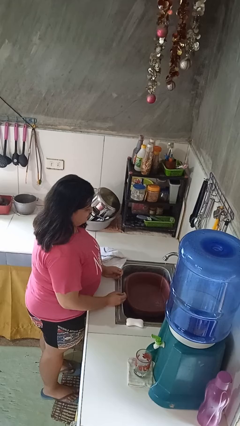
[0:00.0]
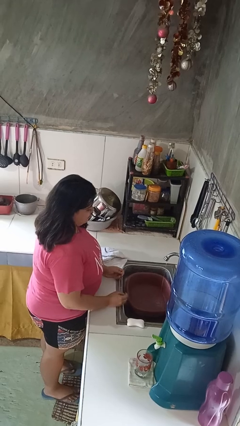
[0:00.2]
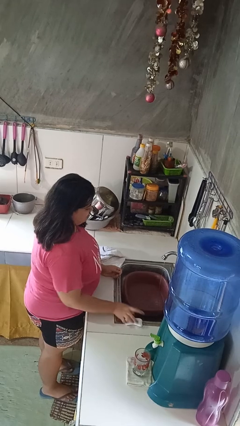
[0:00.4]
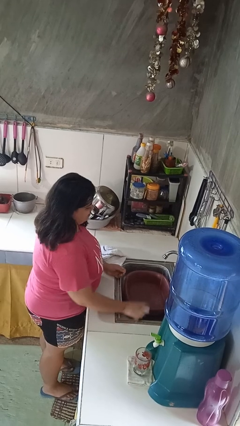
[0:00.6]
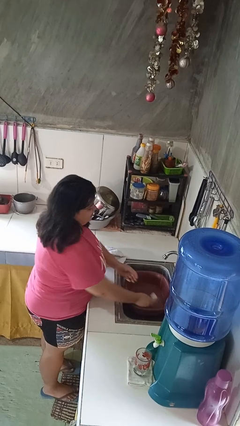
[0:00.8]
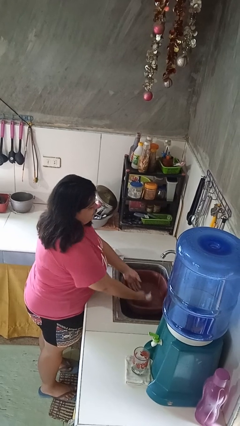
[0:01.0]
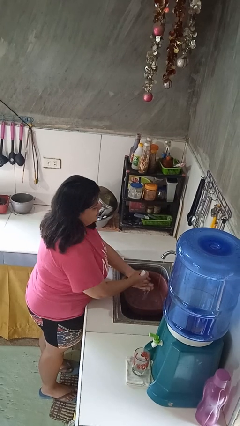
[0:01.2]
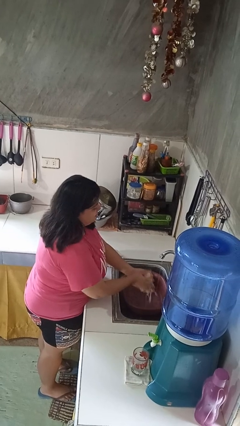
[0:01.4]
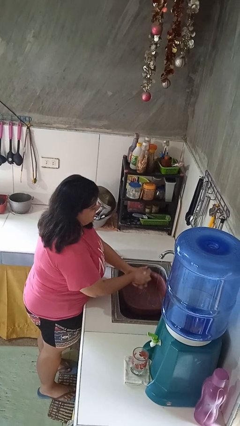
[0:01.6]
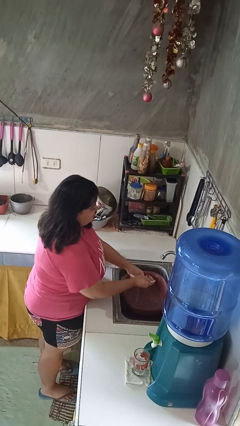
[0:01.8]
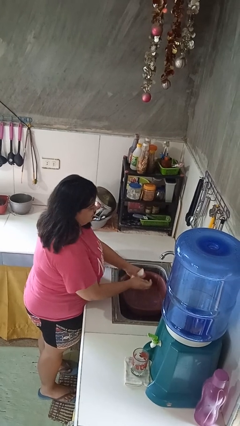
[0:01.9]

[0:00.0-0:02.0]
person washes hands

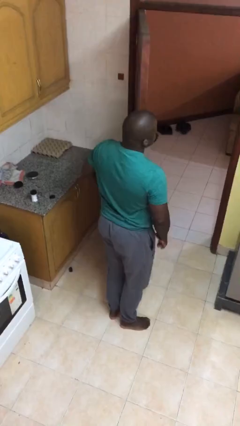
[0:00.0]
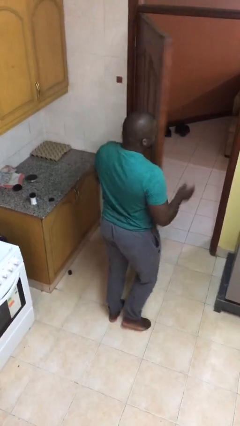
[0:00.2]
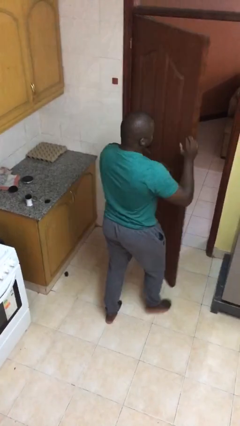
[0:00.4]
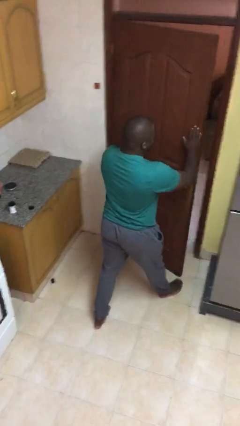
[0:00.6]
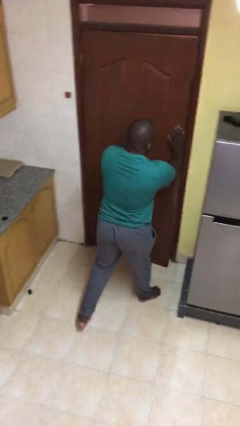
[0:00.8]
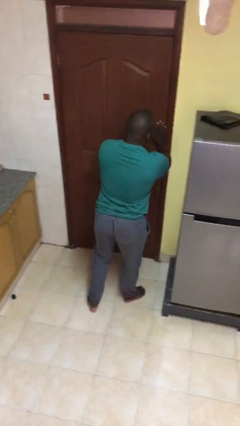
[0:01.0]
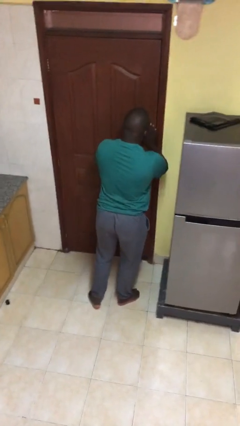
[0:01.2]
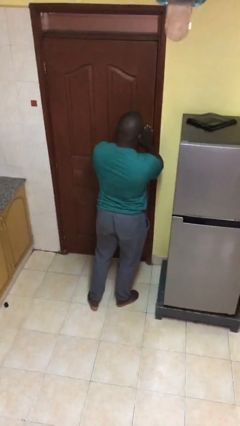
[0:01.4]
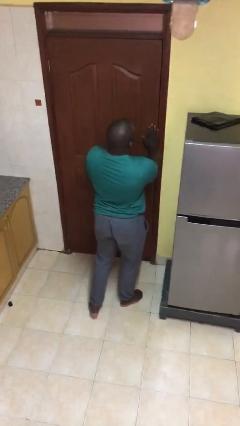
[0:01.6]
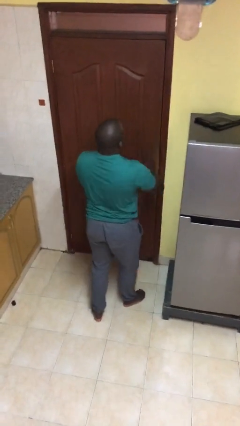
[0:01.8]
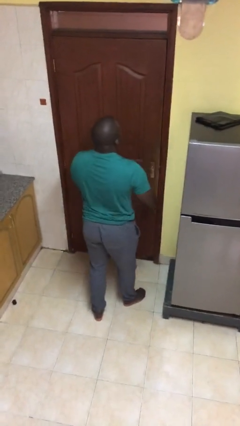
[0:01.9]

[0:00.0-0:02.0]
person closes facility door

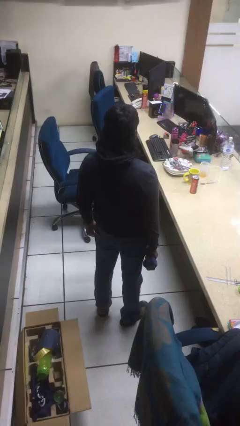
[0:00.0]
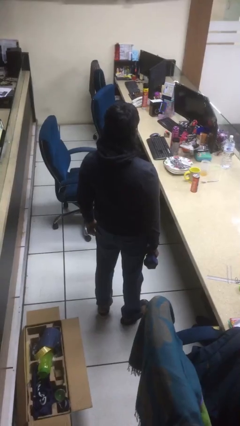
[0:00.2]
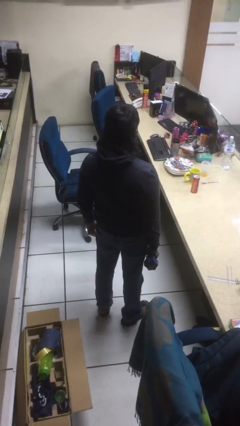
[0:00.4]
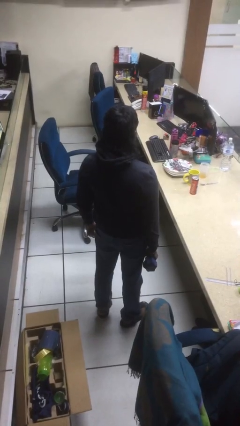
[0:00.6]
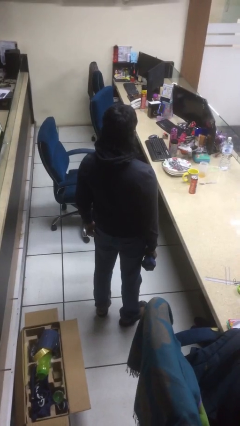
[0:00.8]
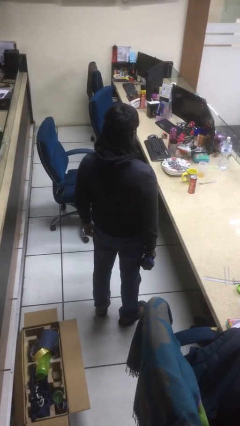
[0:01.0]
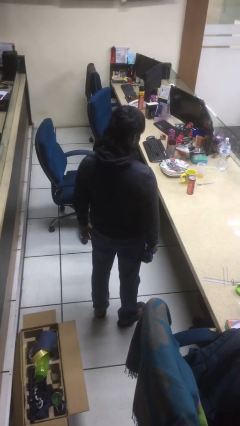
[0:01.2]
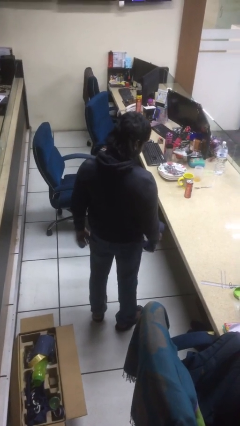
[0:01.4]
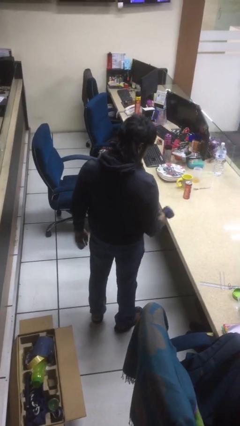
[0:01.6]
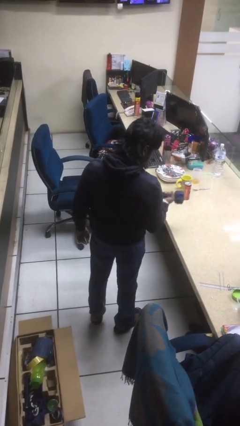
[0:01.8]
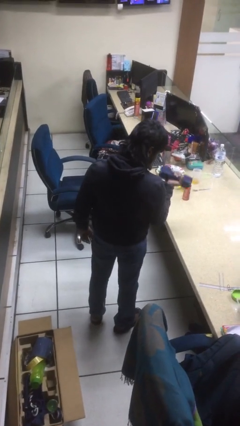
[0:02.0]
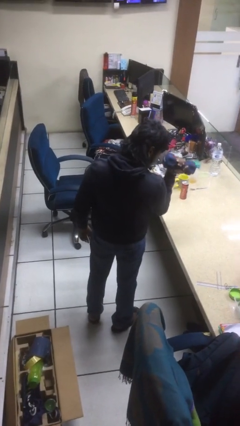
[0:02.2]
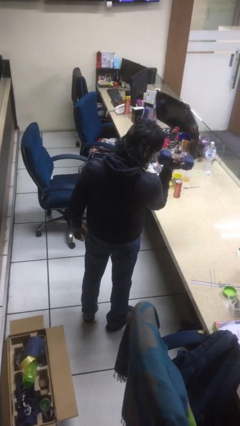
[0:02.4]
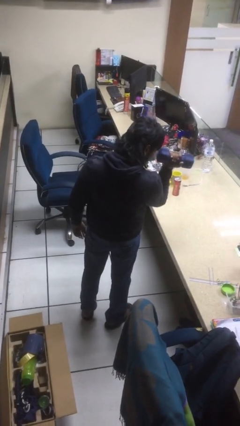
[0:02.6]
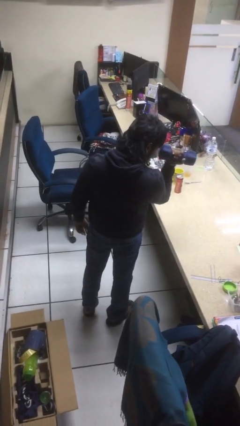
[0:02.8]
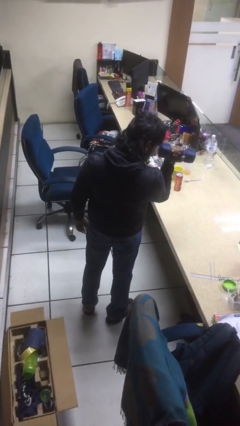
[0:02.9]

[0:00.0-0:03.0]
person lifts dumbbells

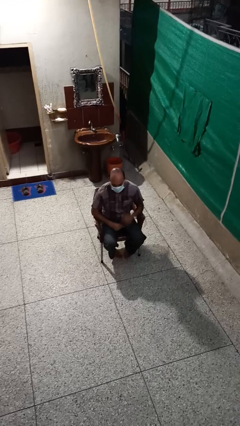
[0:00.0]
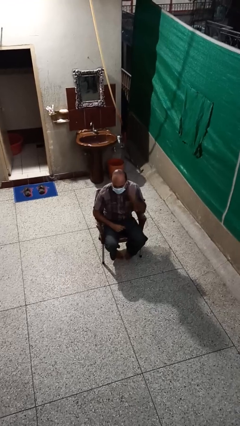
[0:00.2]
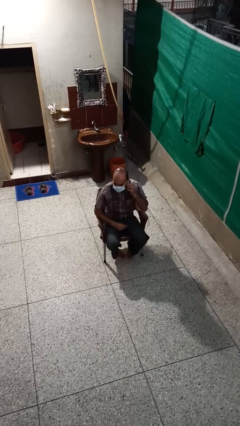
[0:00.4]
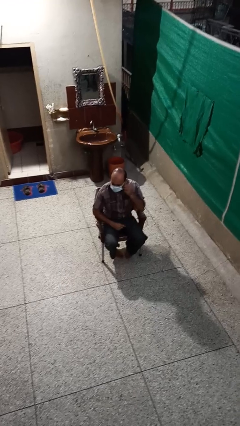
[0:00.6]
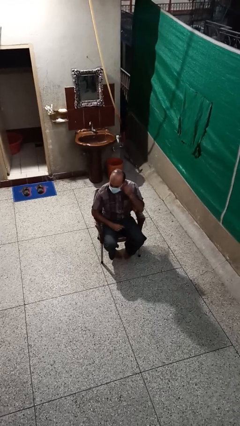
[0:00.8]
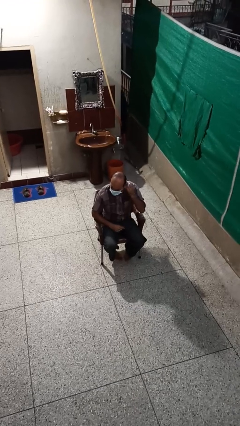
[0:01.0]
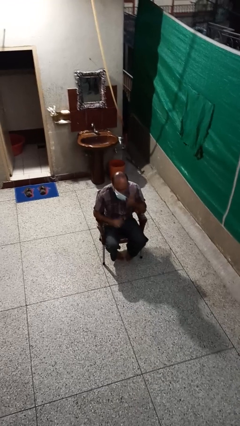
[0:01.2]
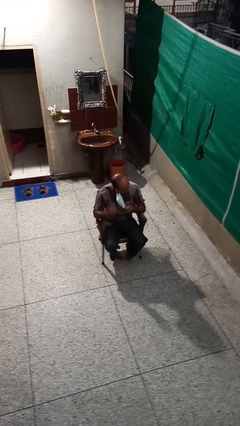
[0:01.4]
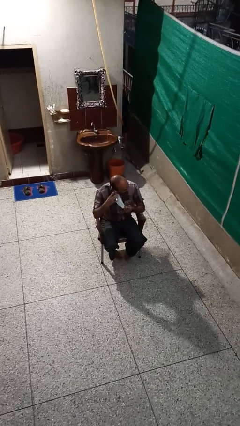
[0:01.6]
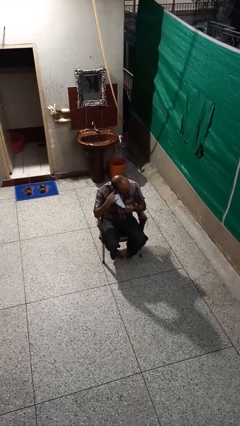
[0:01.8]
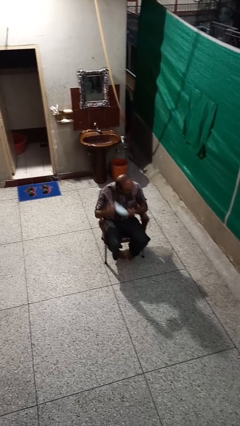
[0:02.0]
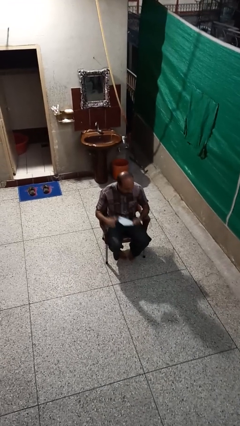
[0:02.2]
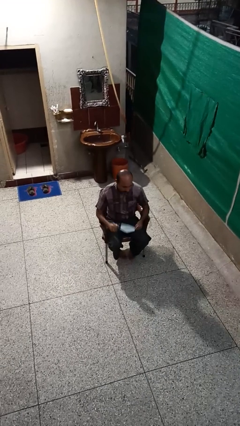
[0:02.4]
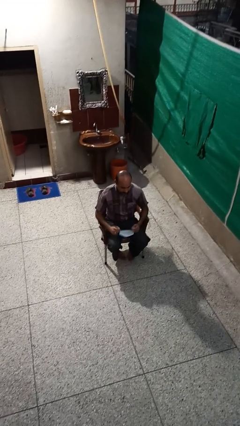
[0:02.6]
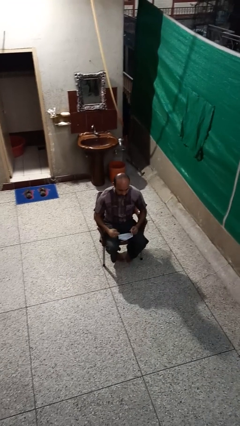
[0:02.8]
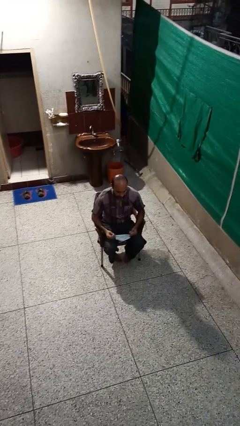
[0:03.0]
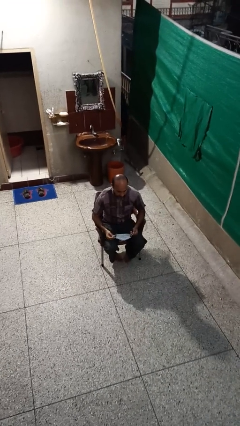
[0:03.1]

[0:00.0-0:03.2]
person takes off facemask

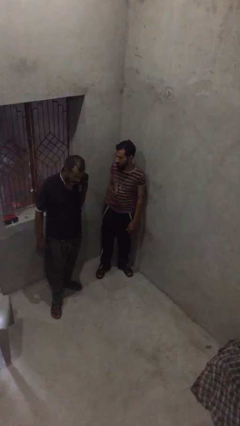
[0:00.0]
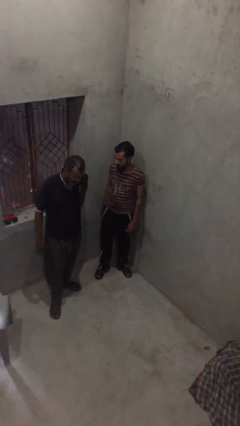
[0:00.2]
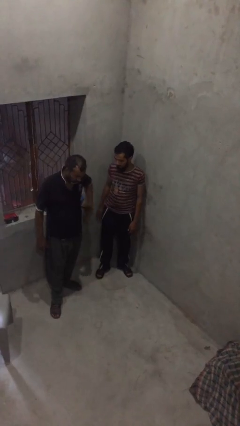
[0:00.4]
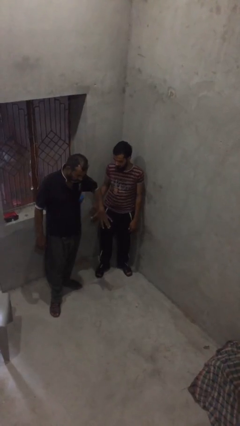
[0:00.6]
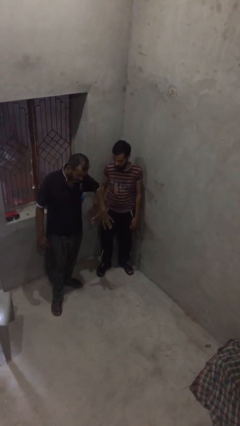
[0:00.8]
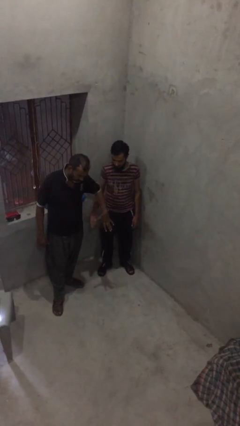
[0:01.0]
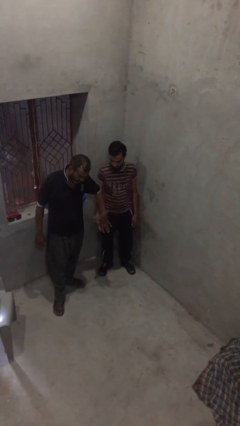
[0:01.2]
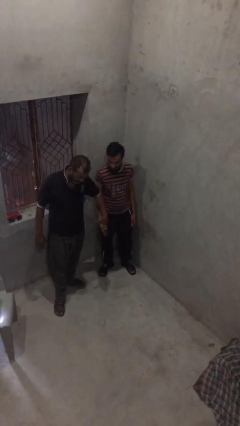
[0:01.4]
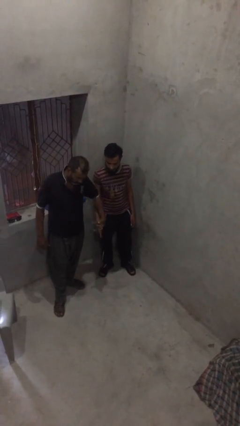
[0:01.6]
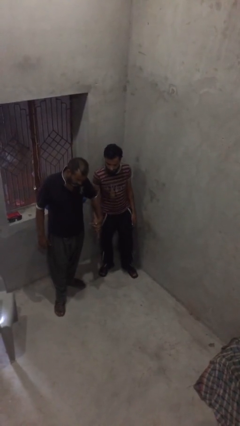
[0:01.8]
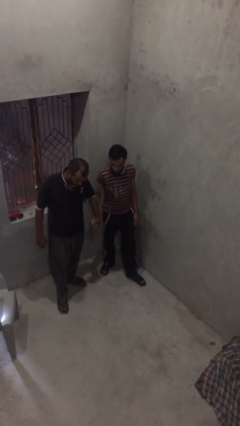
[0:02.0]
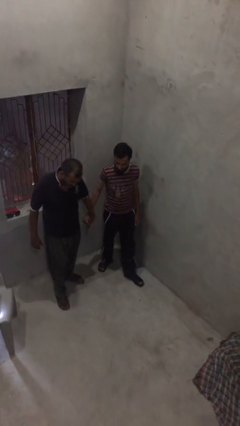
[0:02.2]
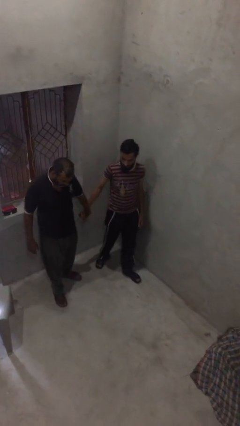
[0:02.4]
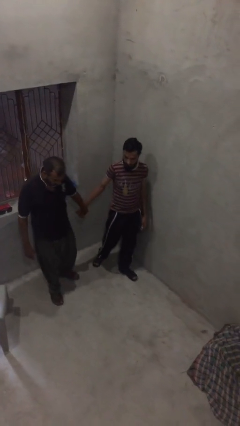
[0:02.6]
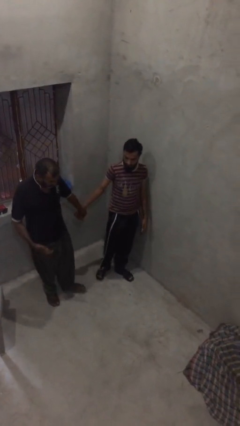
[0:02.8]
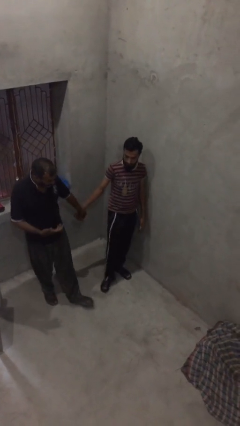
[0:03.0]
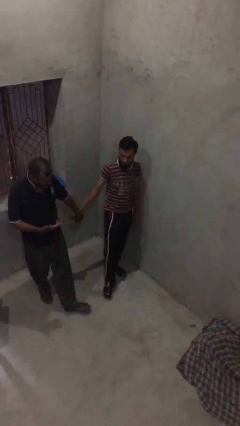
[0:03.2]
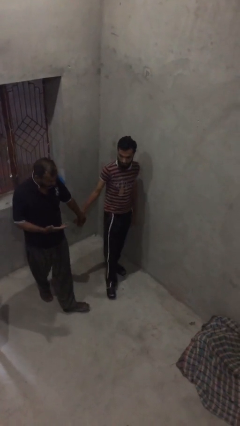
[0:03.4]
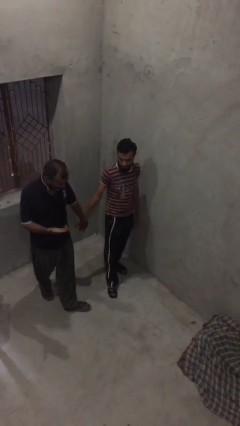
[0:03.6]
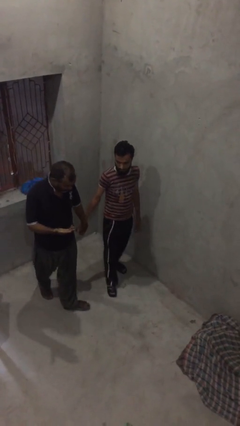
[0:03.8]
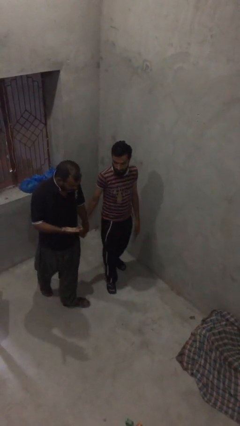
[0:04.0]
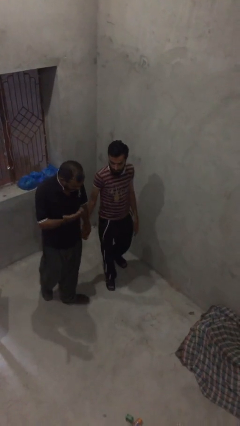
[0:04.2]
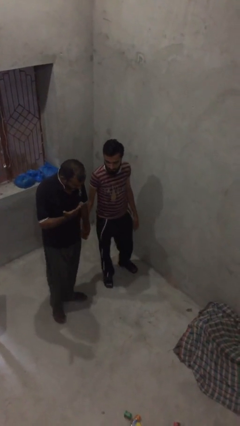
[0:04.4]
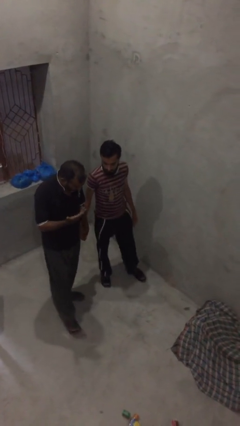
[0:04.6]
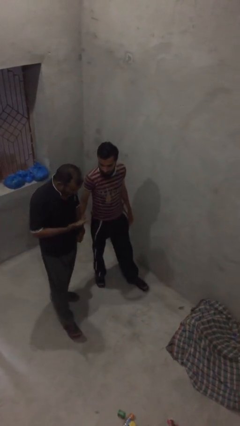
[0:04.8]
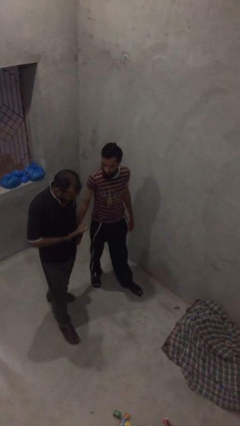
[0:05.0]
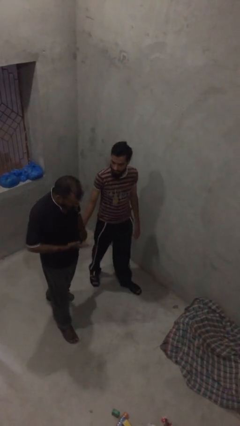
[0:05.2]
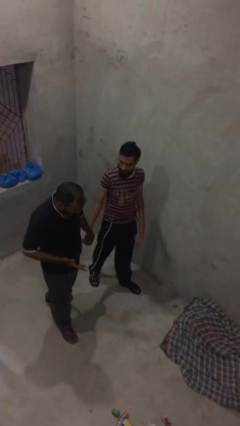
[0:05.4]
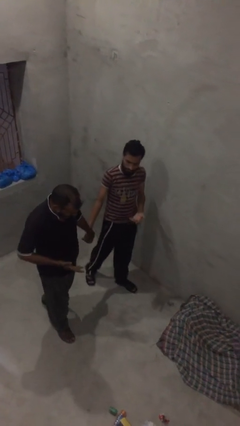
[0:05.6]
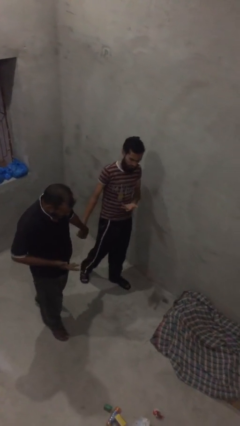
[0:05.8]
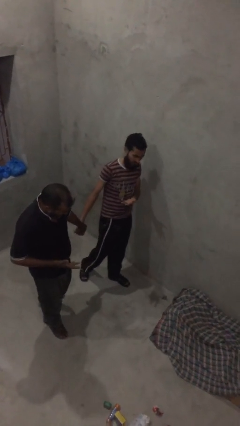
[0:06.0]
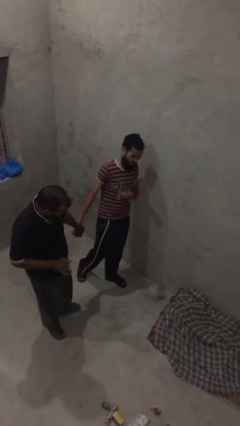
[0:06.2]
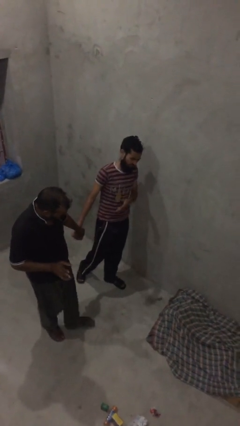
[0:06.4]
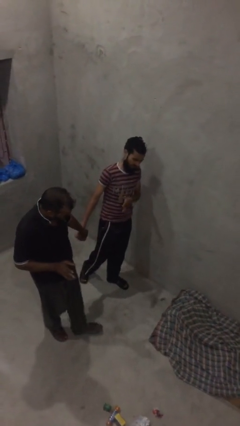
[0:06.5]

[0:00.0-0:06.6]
person holds hand

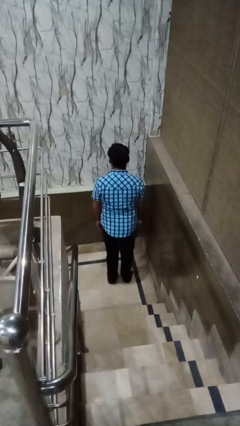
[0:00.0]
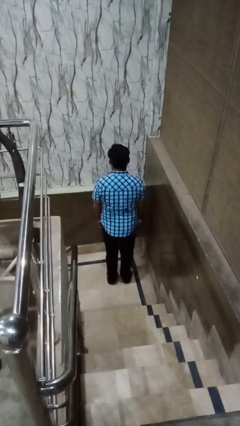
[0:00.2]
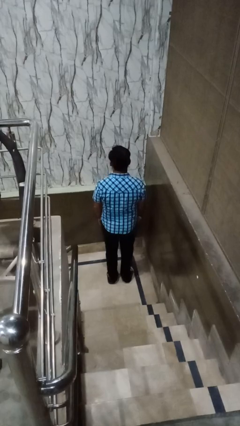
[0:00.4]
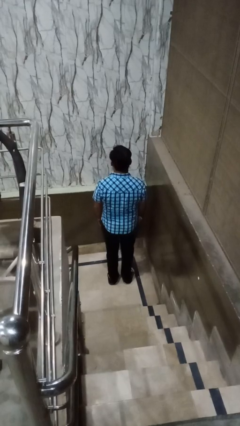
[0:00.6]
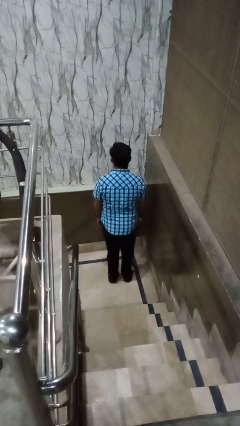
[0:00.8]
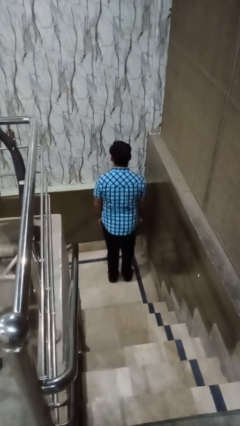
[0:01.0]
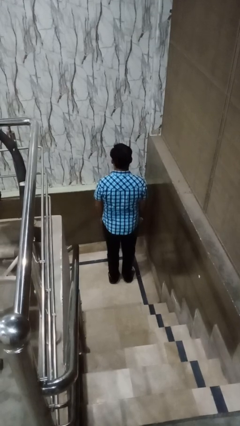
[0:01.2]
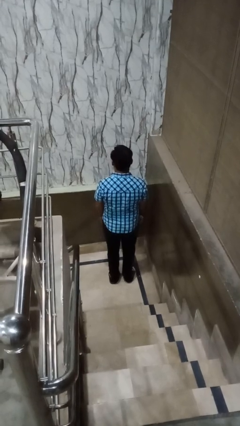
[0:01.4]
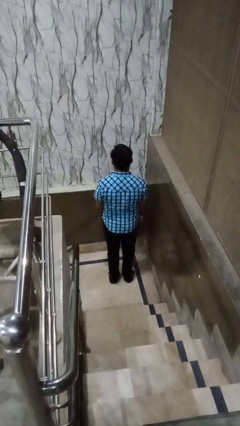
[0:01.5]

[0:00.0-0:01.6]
person wiggles hips
